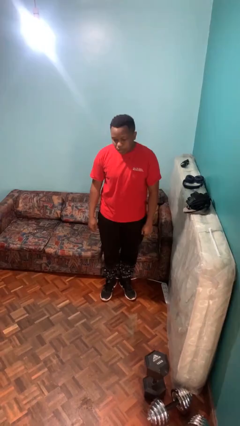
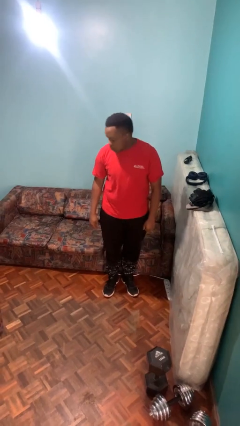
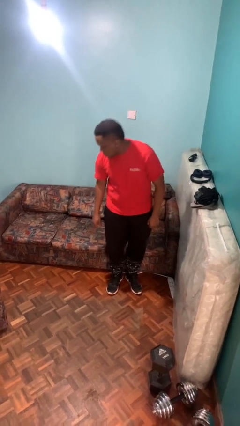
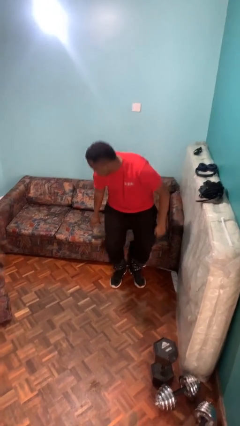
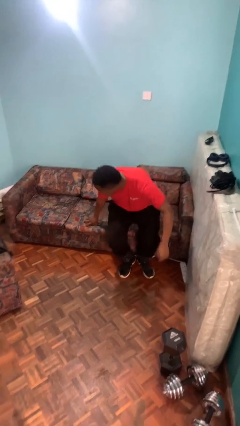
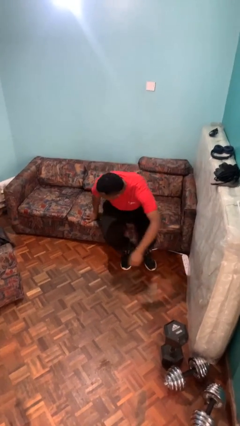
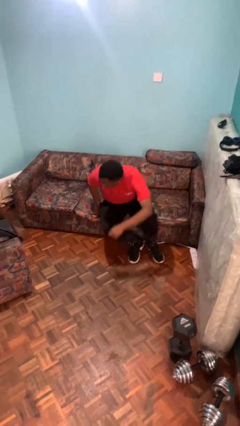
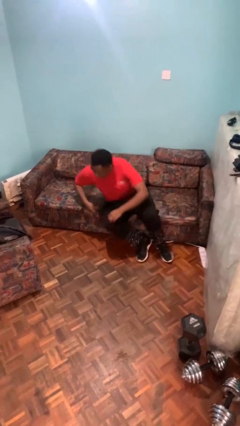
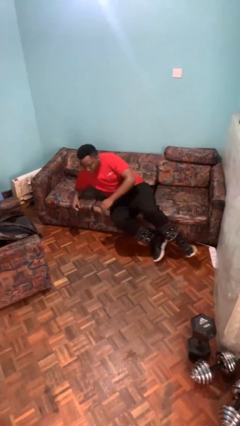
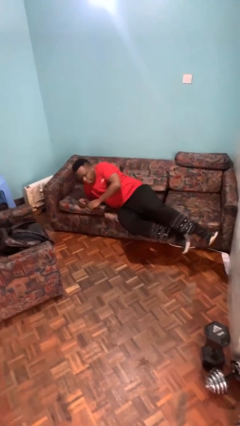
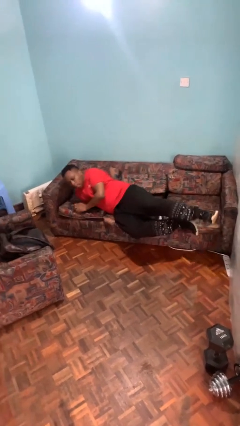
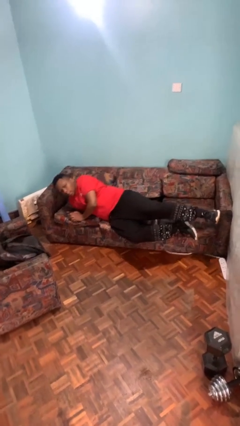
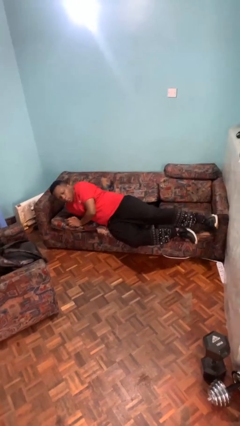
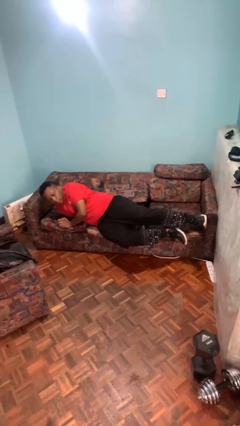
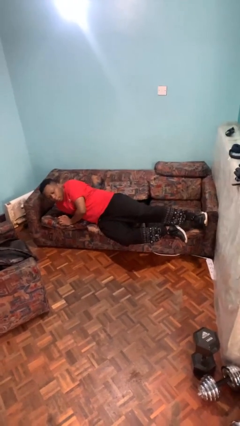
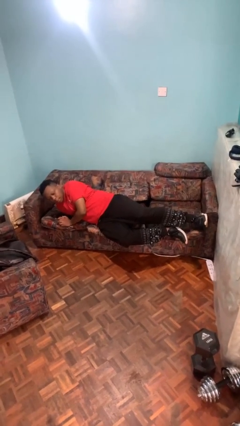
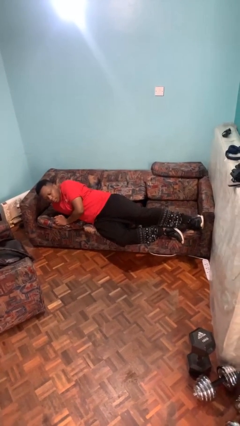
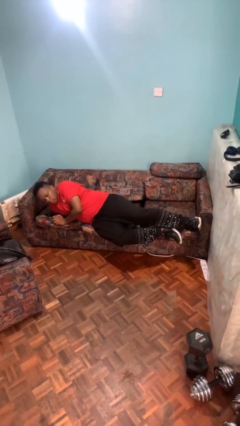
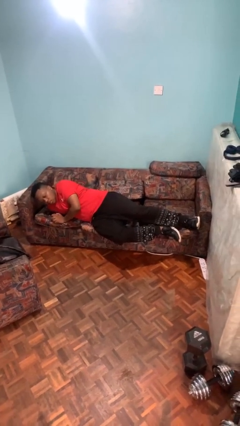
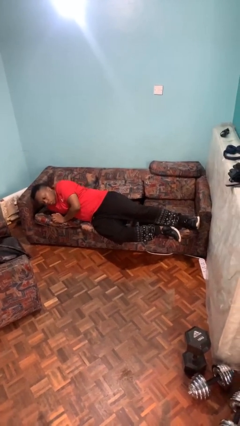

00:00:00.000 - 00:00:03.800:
person lies down on couch

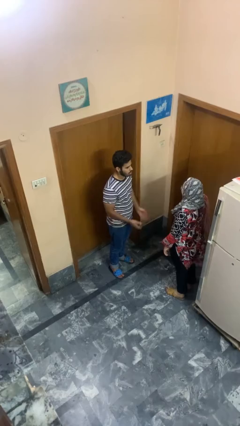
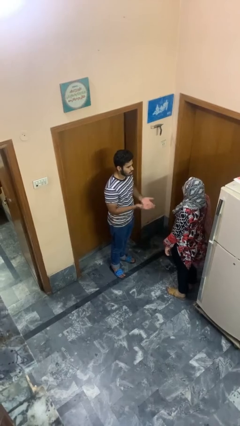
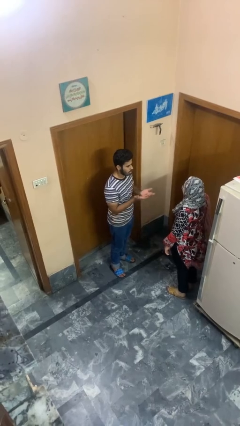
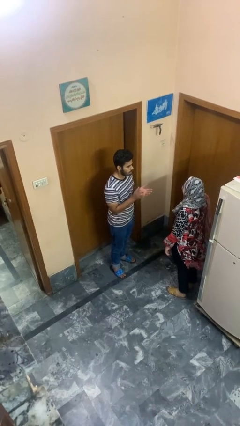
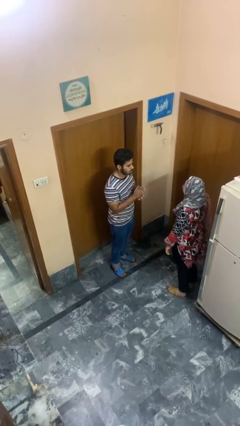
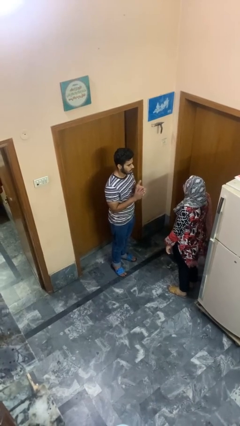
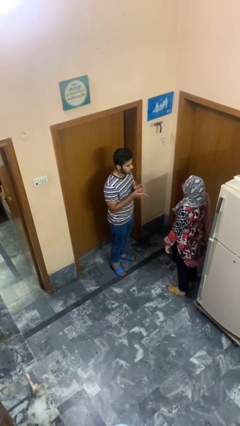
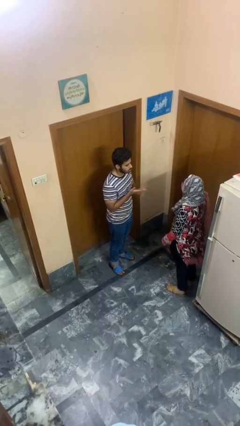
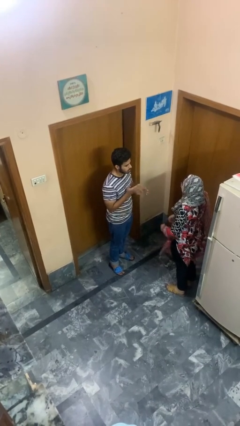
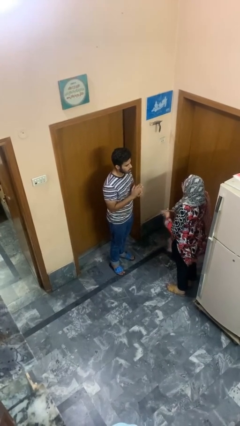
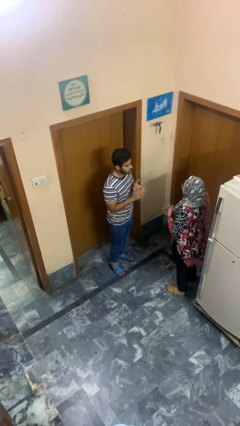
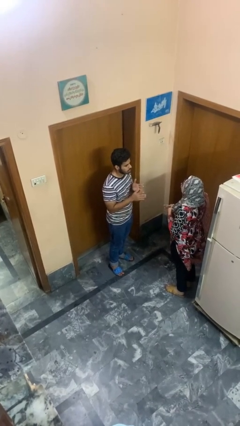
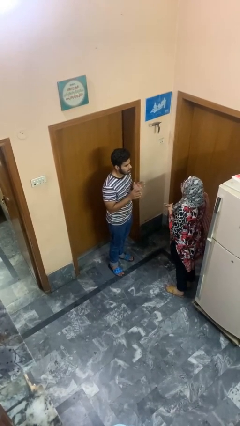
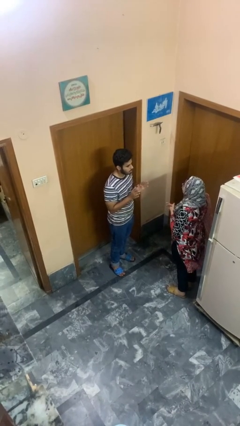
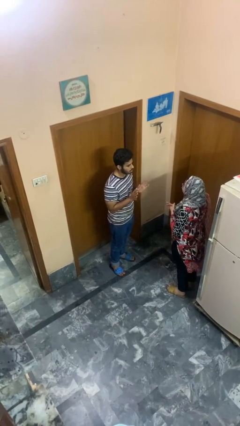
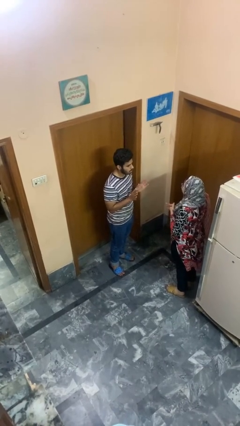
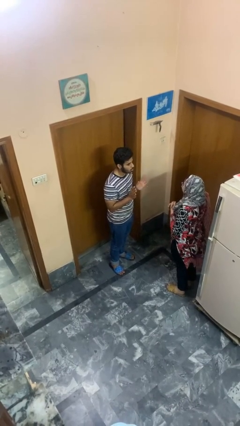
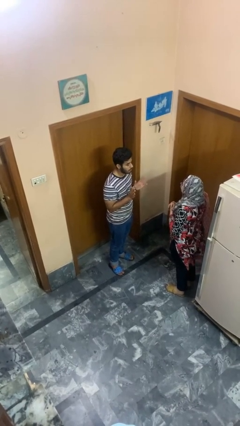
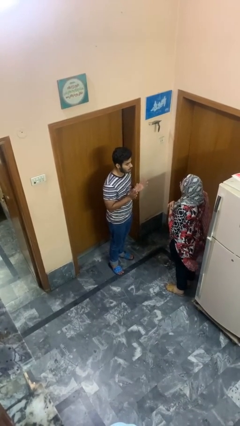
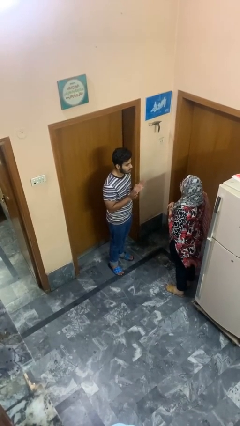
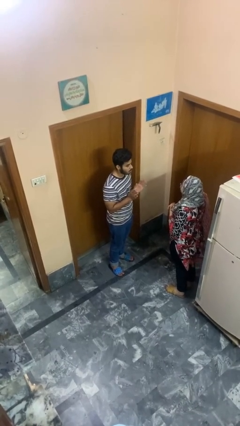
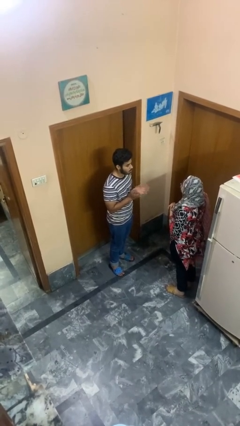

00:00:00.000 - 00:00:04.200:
person talks to person

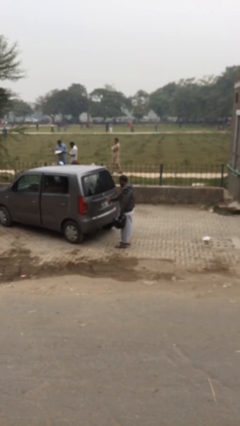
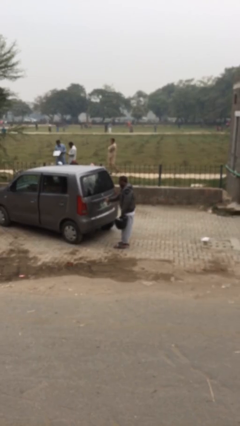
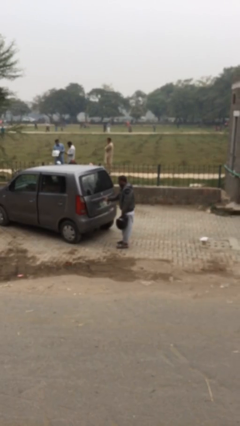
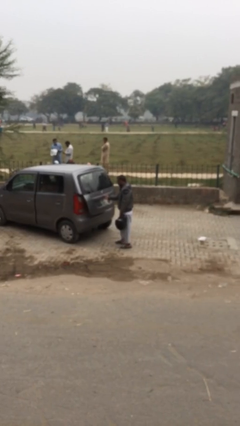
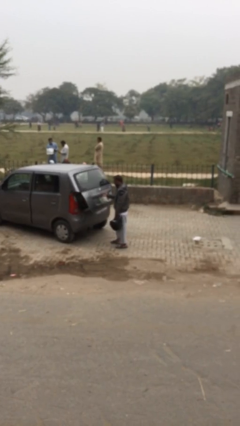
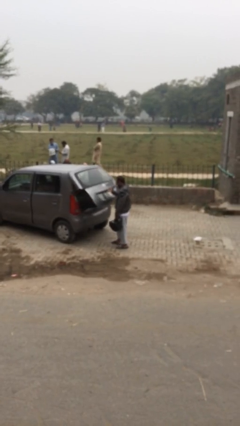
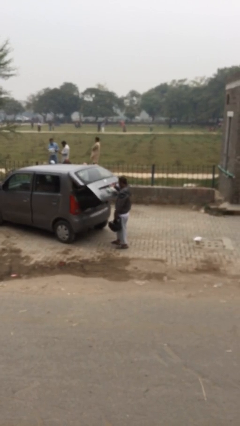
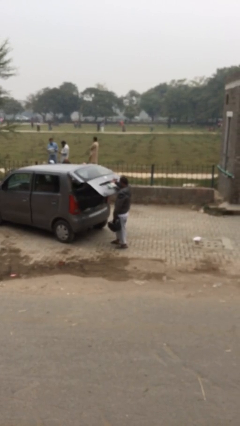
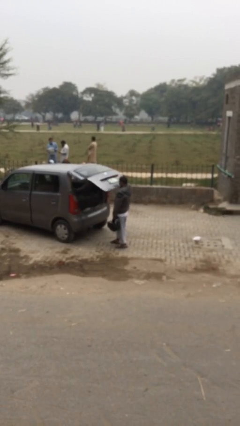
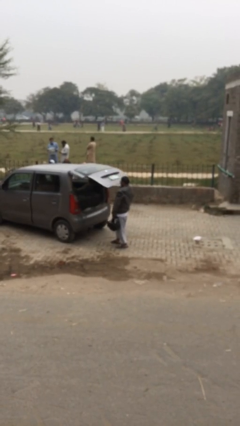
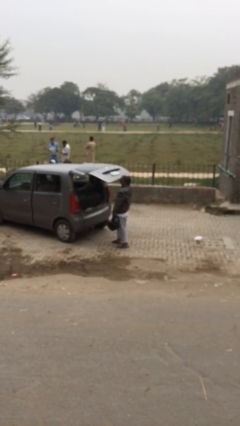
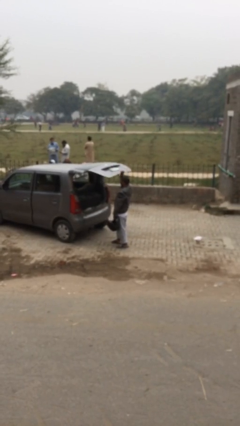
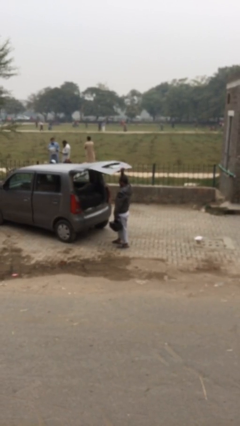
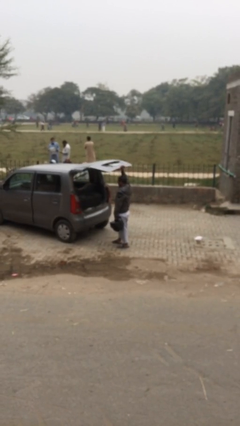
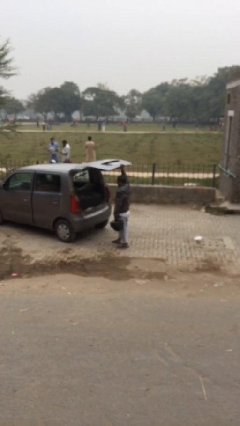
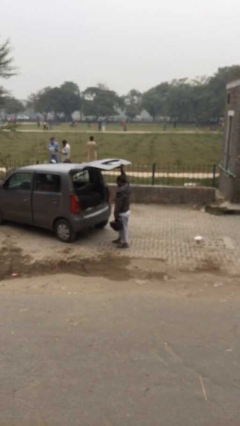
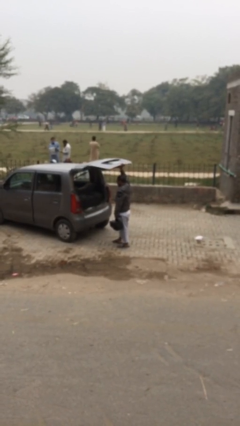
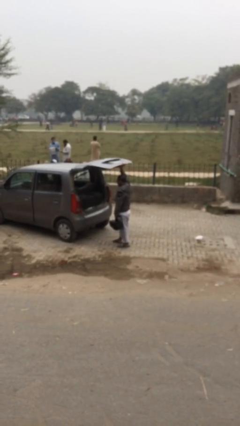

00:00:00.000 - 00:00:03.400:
person opens car trunk

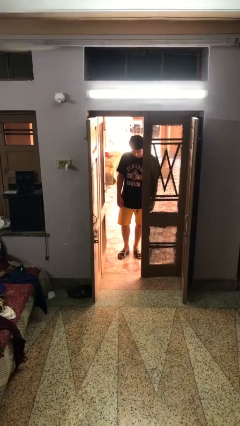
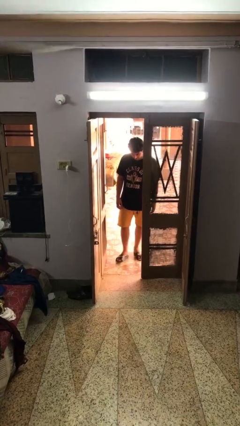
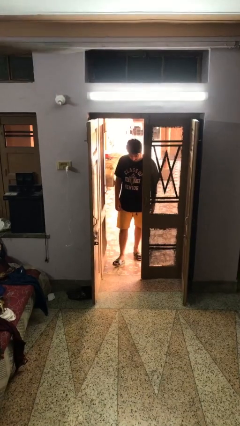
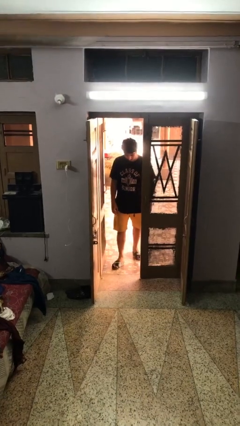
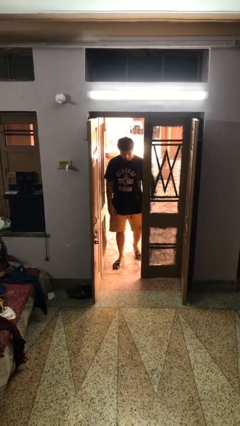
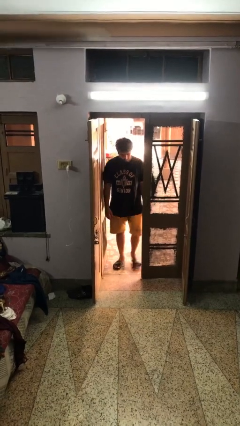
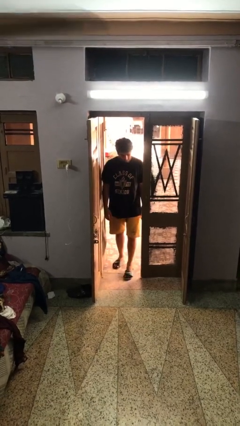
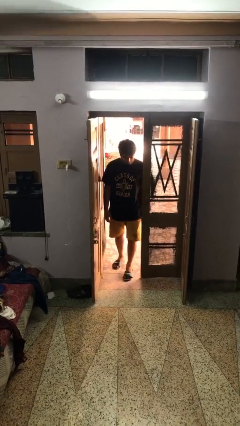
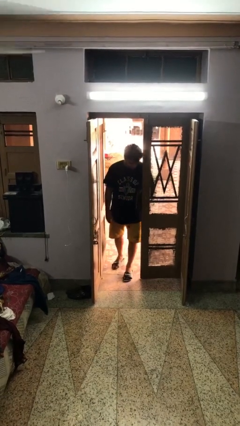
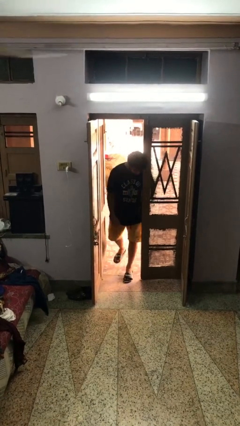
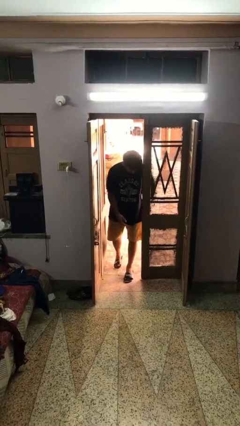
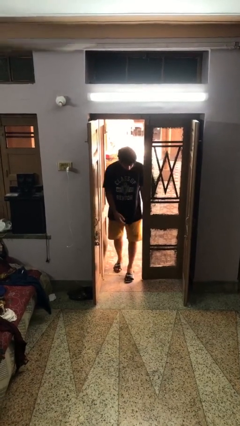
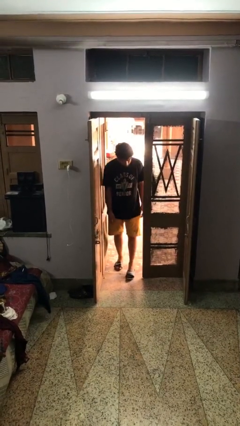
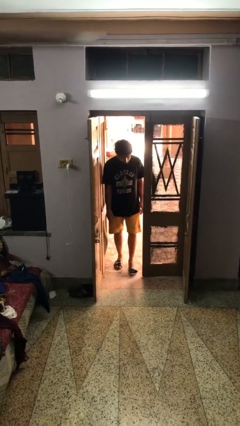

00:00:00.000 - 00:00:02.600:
person bumps into wall

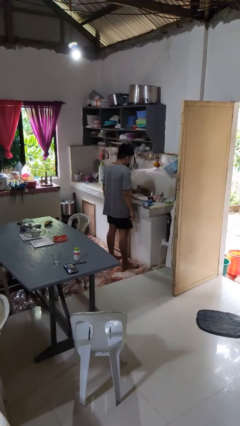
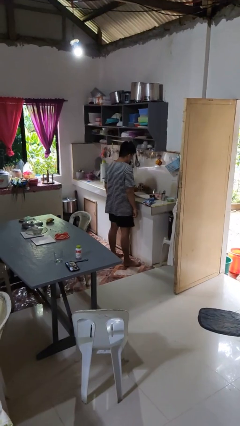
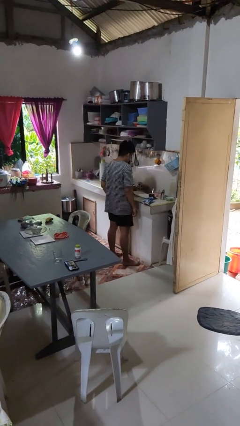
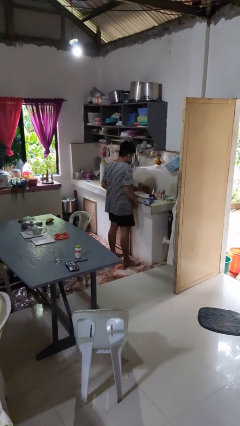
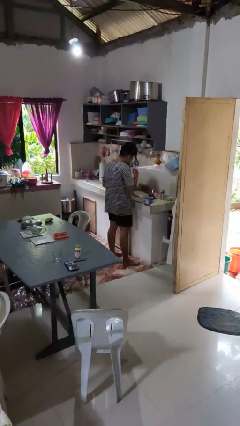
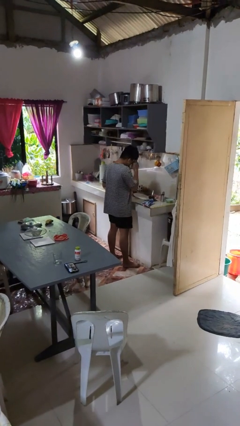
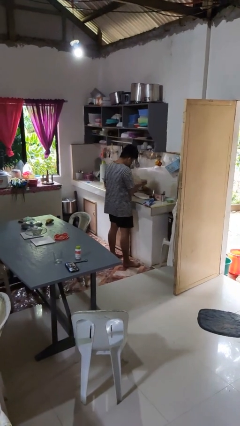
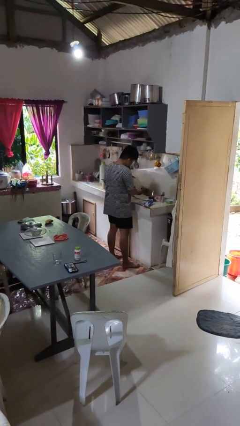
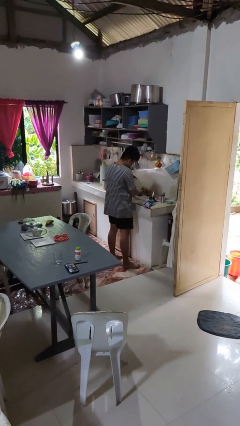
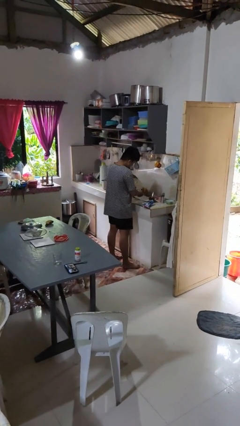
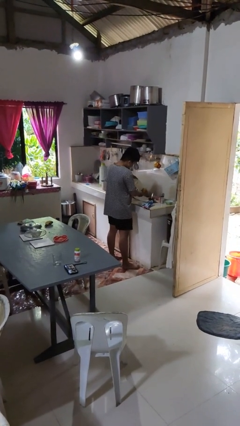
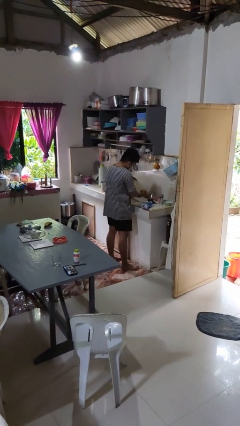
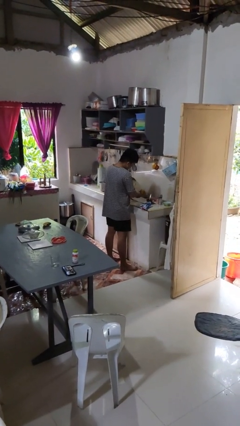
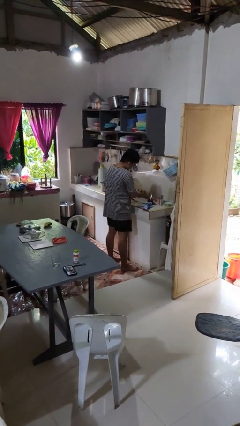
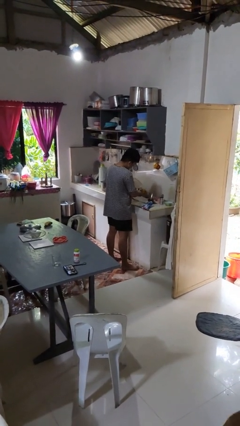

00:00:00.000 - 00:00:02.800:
person washes hands
